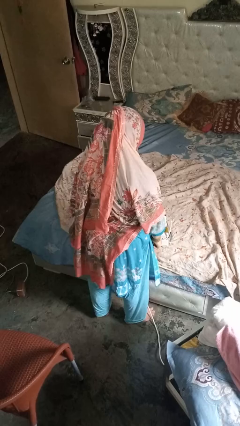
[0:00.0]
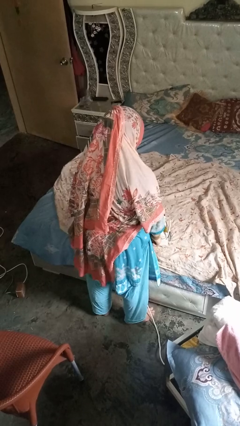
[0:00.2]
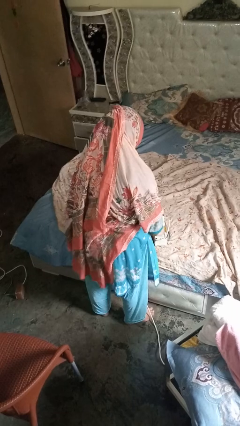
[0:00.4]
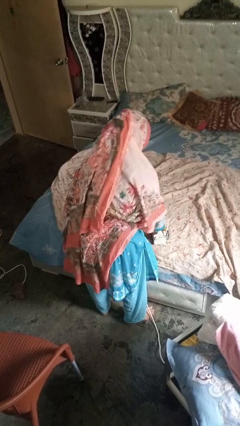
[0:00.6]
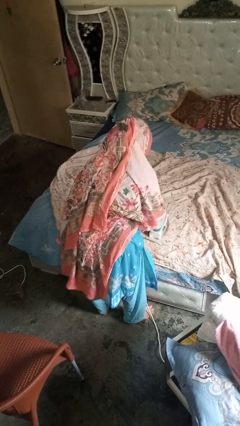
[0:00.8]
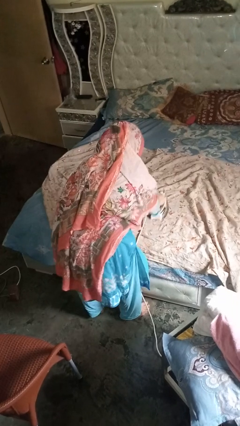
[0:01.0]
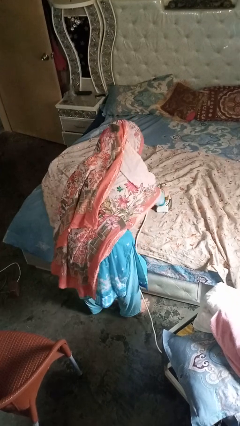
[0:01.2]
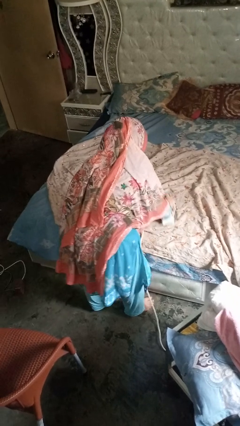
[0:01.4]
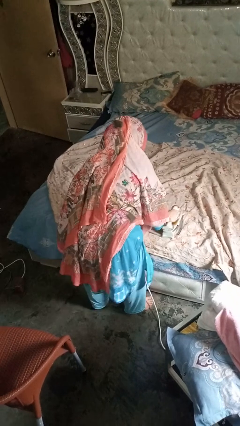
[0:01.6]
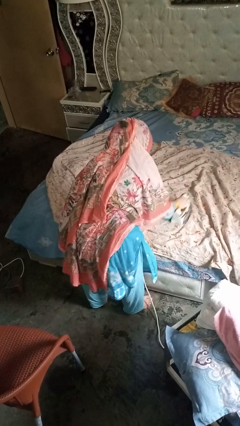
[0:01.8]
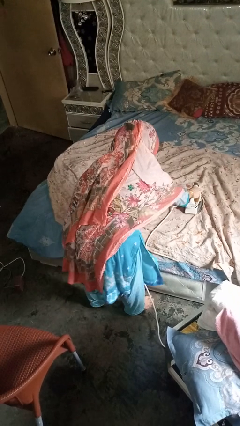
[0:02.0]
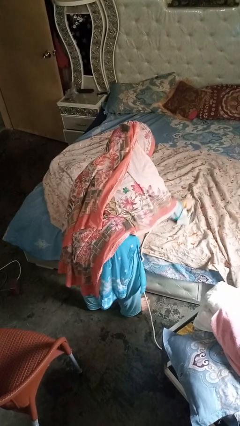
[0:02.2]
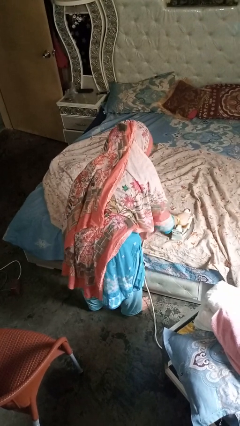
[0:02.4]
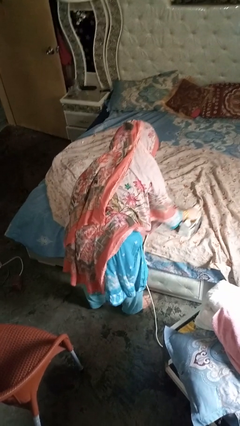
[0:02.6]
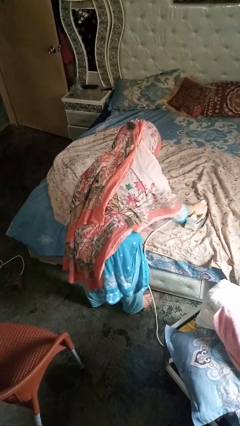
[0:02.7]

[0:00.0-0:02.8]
person irons clothes

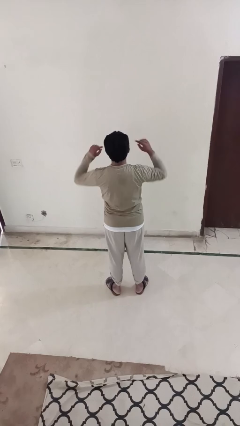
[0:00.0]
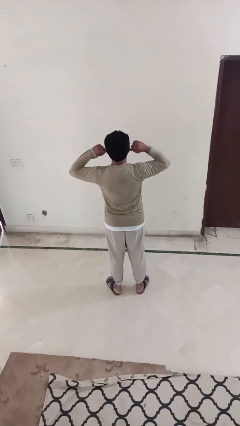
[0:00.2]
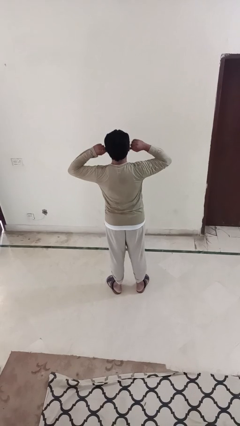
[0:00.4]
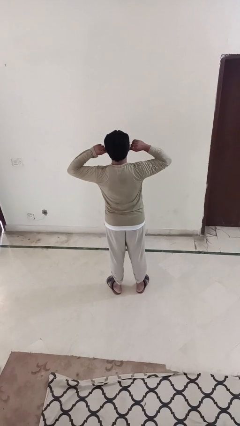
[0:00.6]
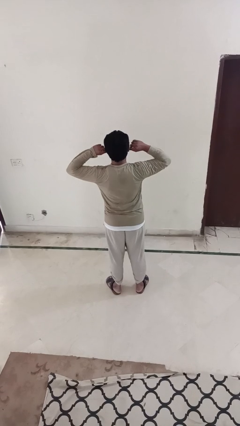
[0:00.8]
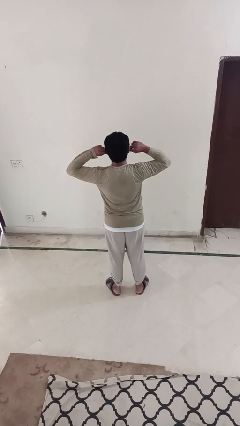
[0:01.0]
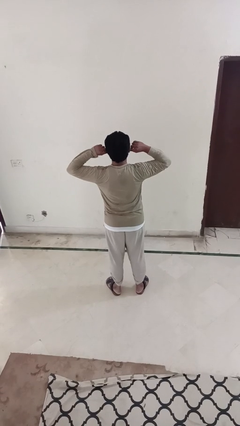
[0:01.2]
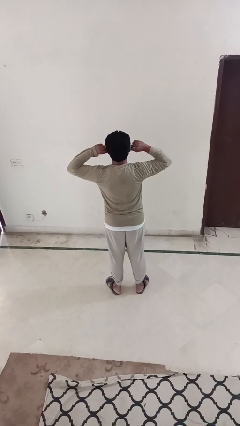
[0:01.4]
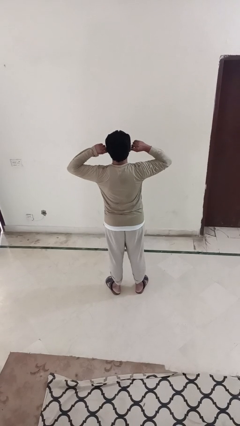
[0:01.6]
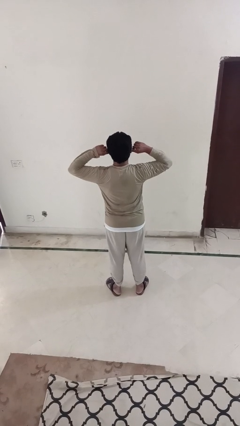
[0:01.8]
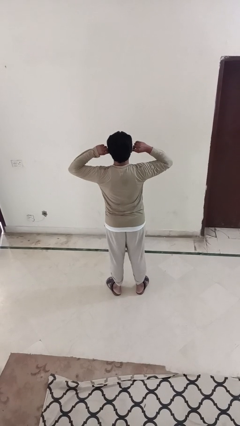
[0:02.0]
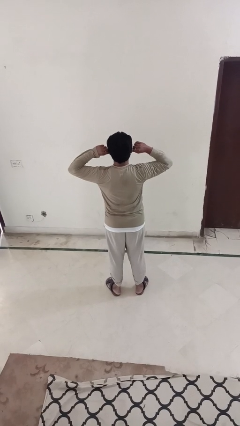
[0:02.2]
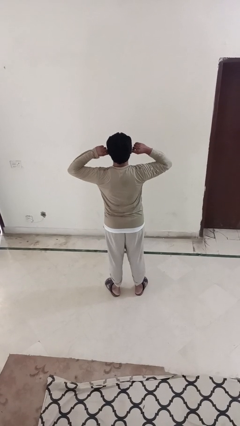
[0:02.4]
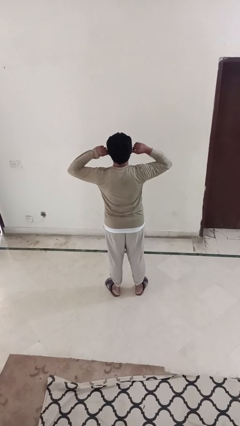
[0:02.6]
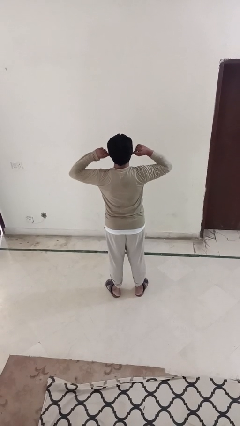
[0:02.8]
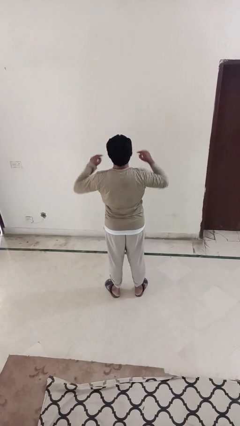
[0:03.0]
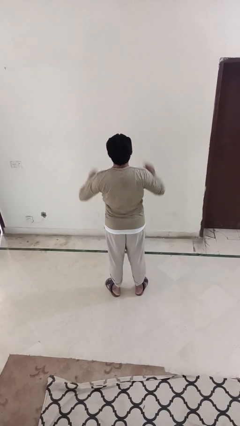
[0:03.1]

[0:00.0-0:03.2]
person puts fingers in ear

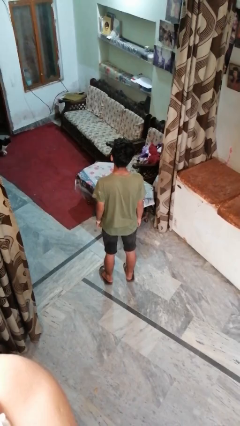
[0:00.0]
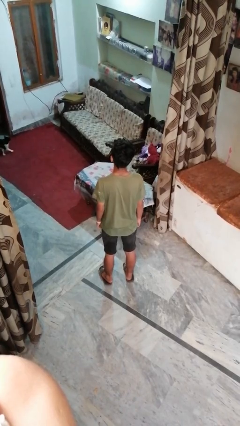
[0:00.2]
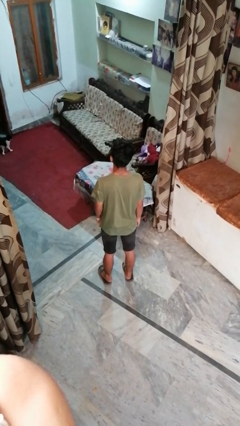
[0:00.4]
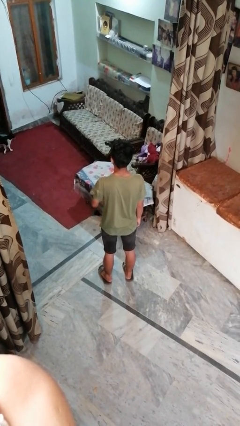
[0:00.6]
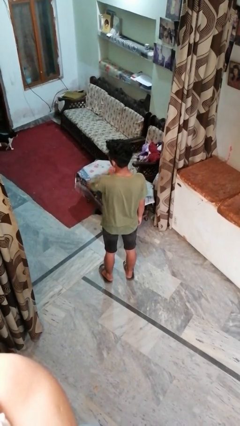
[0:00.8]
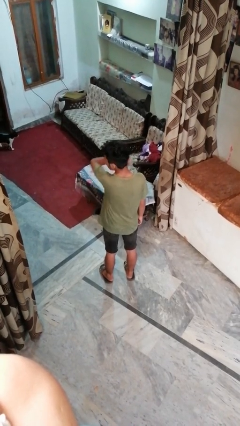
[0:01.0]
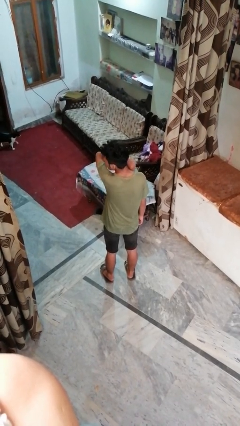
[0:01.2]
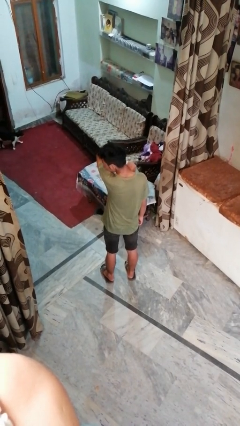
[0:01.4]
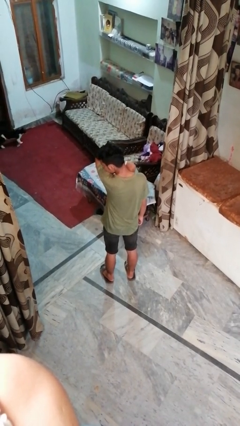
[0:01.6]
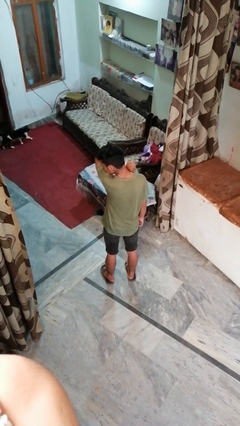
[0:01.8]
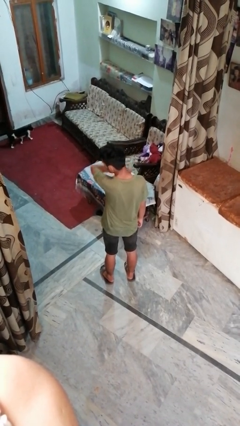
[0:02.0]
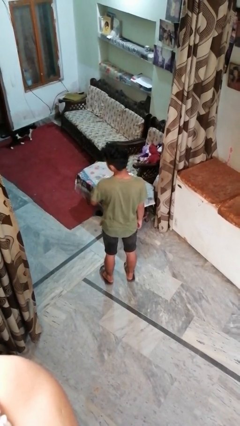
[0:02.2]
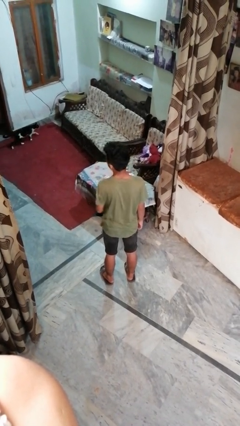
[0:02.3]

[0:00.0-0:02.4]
person sneezes into arm

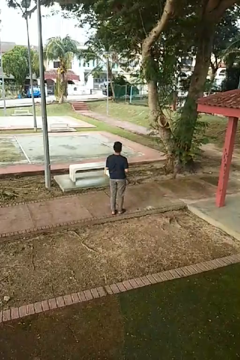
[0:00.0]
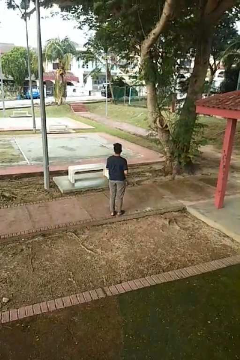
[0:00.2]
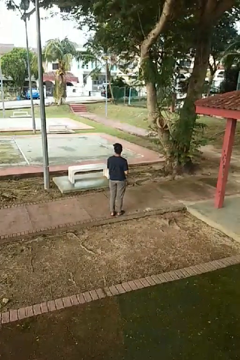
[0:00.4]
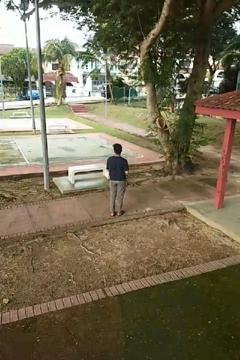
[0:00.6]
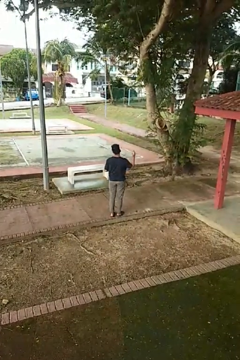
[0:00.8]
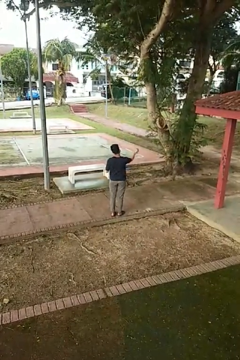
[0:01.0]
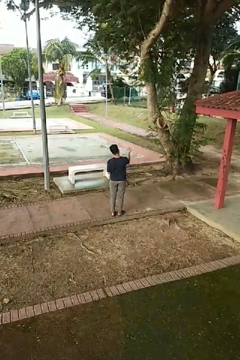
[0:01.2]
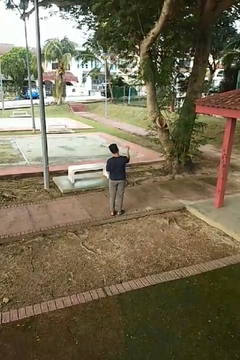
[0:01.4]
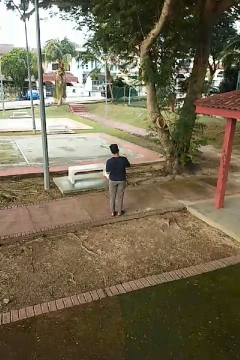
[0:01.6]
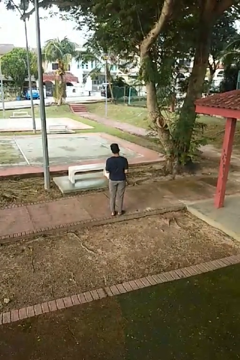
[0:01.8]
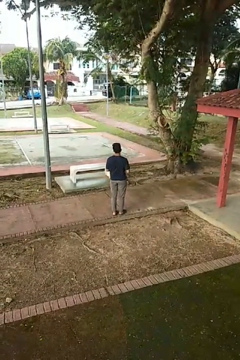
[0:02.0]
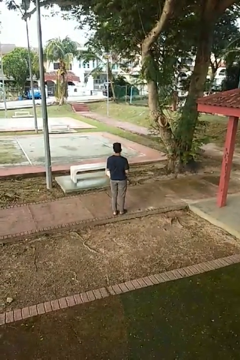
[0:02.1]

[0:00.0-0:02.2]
person karate chop

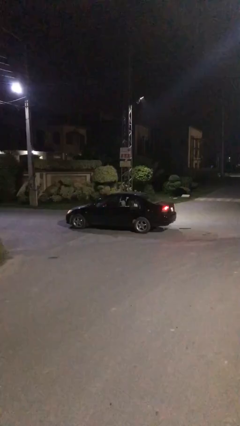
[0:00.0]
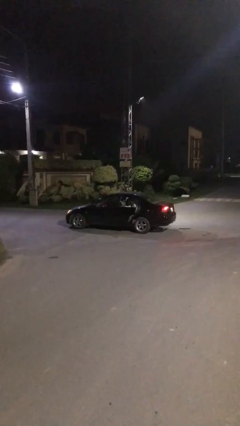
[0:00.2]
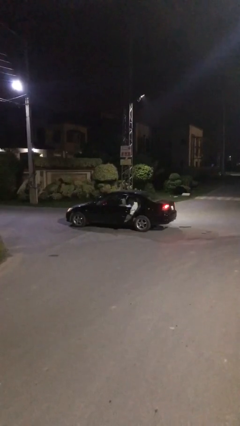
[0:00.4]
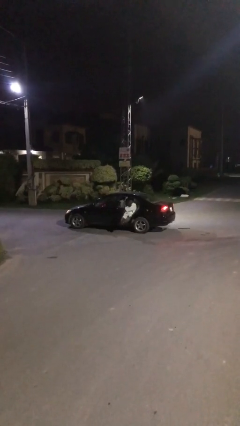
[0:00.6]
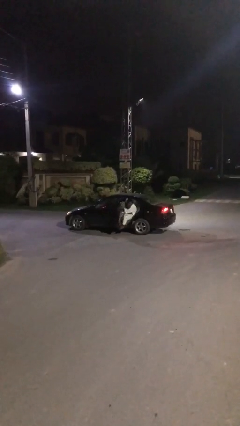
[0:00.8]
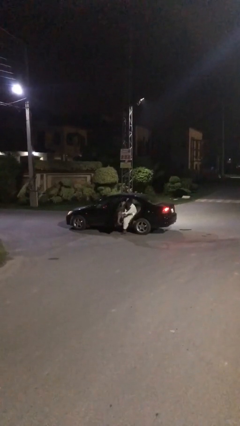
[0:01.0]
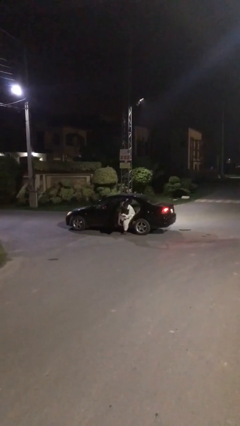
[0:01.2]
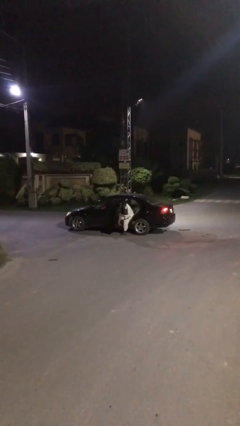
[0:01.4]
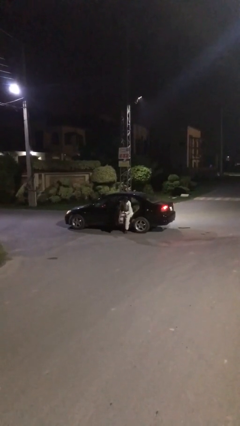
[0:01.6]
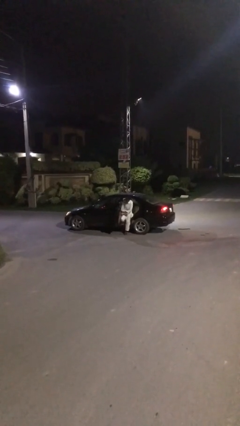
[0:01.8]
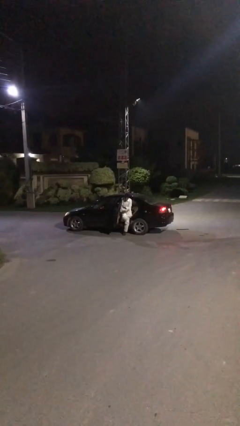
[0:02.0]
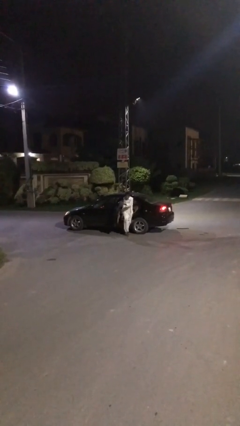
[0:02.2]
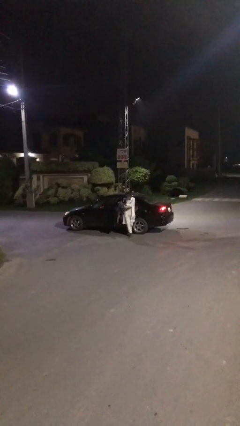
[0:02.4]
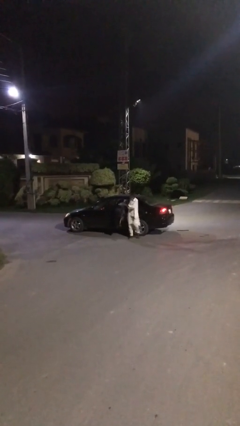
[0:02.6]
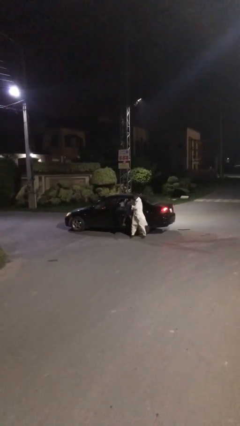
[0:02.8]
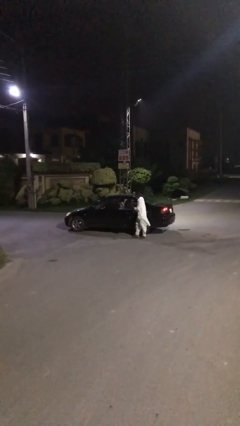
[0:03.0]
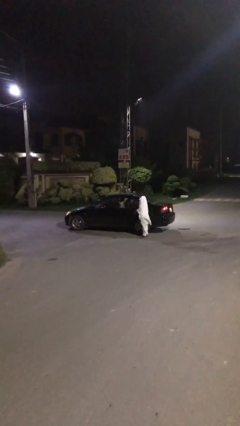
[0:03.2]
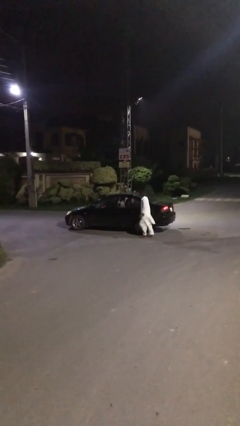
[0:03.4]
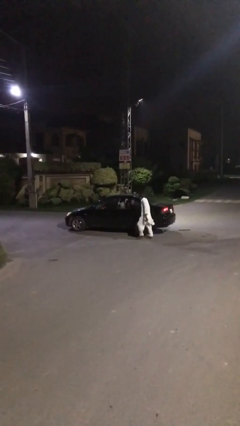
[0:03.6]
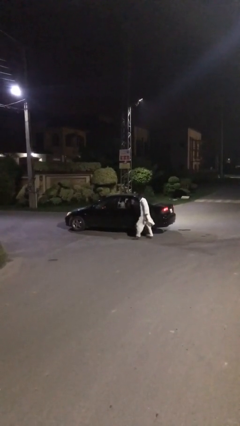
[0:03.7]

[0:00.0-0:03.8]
car drops off person

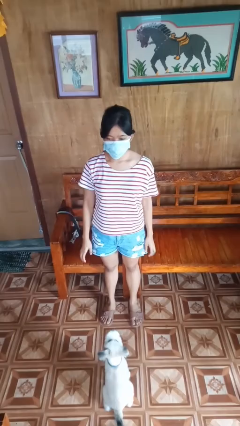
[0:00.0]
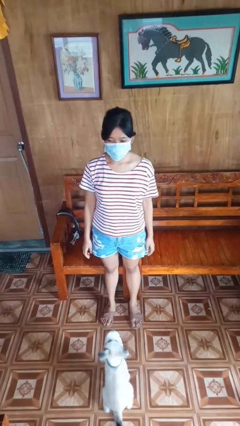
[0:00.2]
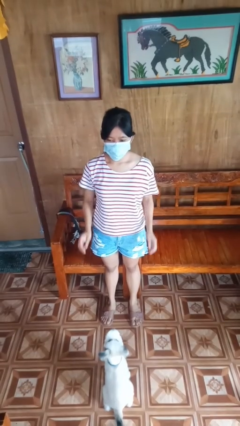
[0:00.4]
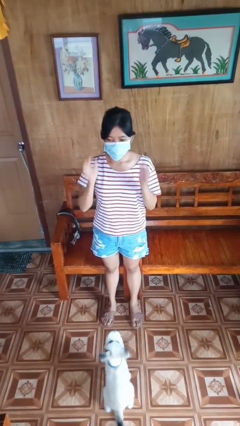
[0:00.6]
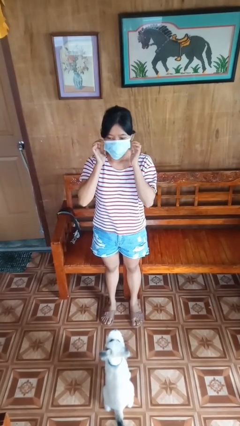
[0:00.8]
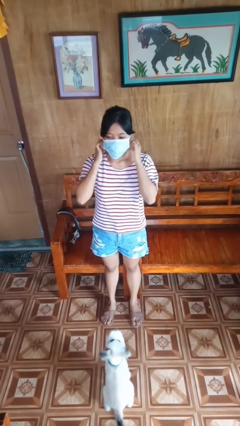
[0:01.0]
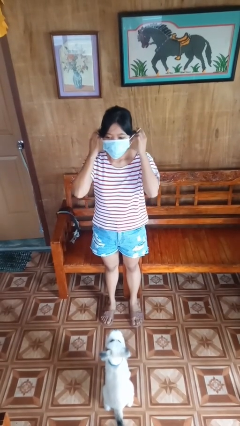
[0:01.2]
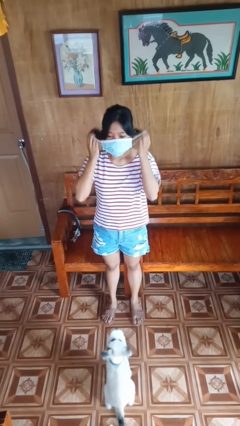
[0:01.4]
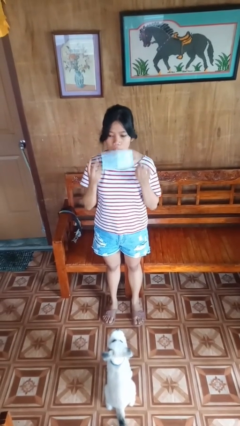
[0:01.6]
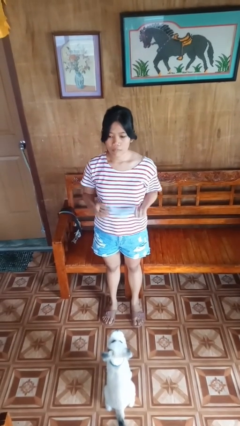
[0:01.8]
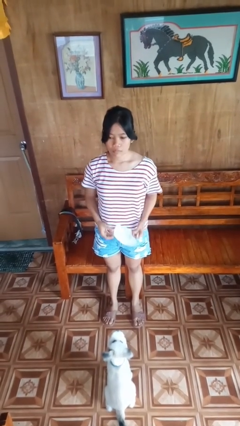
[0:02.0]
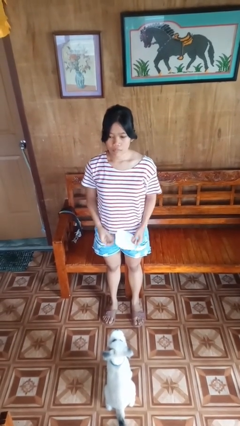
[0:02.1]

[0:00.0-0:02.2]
person takes off facemask

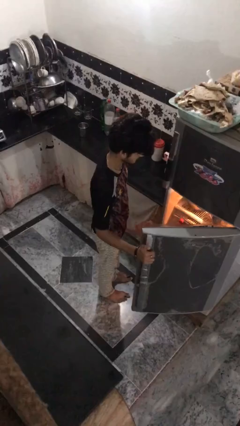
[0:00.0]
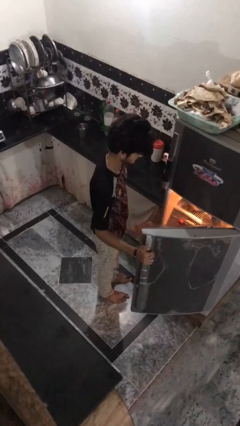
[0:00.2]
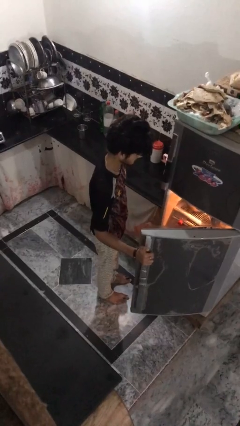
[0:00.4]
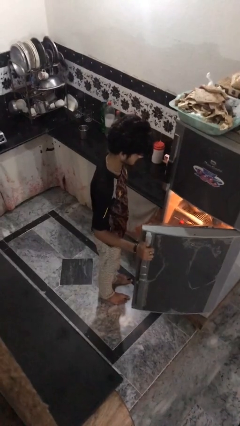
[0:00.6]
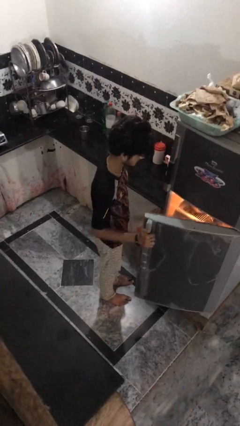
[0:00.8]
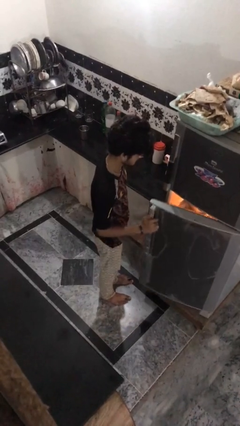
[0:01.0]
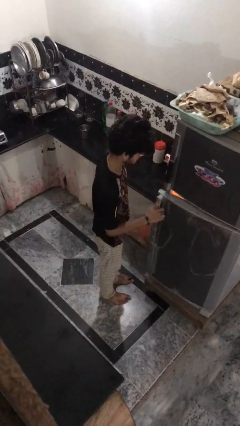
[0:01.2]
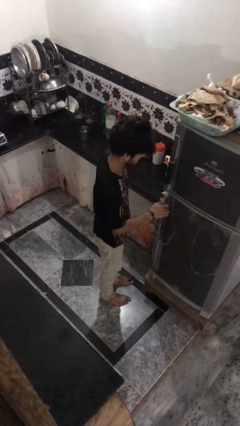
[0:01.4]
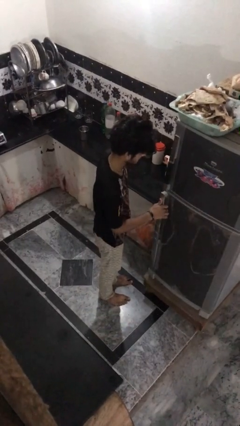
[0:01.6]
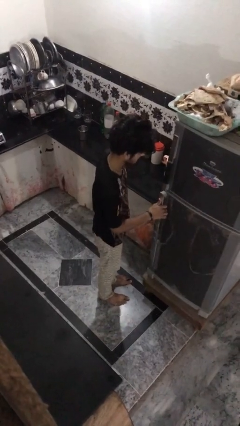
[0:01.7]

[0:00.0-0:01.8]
person closes refrigerator
